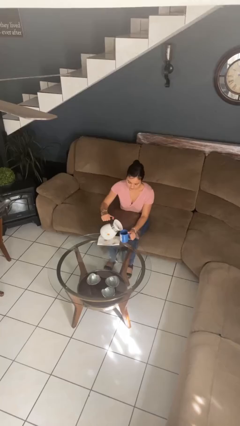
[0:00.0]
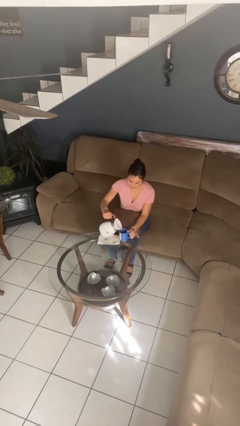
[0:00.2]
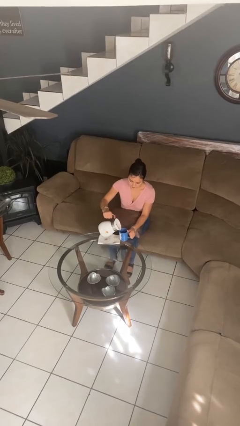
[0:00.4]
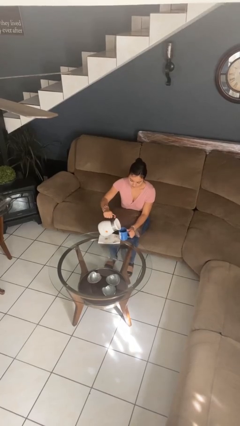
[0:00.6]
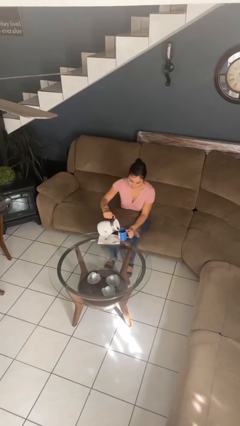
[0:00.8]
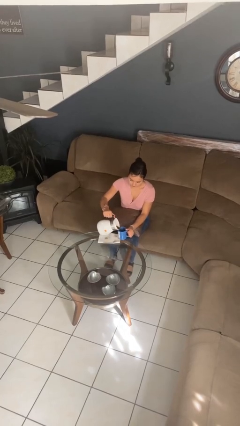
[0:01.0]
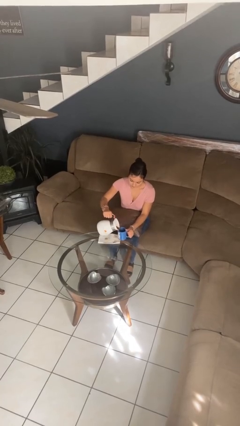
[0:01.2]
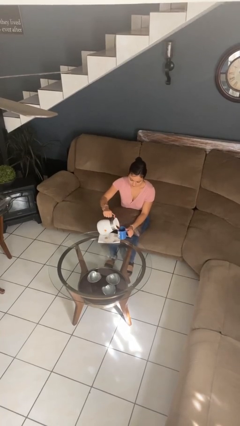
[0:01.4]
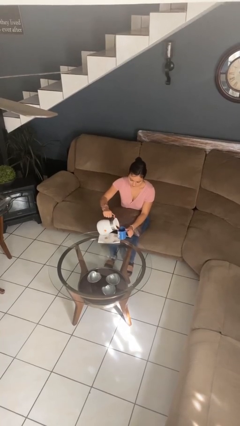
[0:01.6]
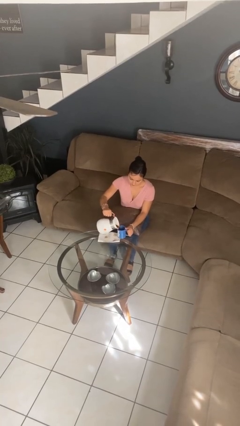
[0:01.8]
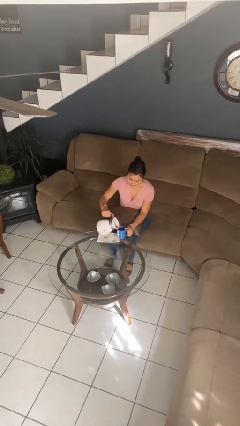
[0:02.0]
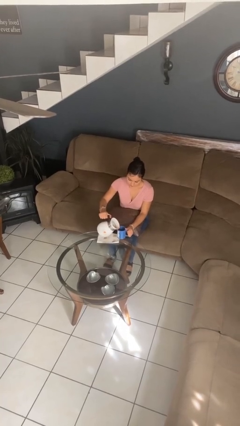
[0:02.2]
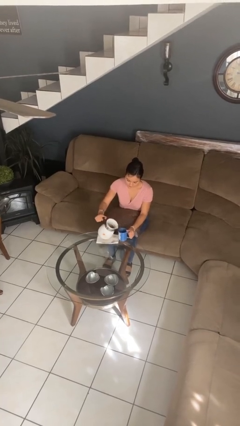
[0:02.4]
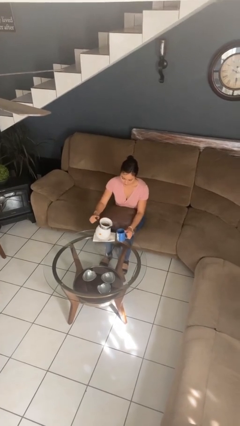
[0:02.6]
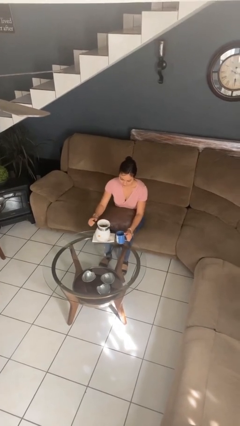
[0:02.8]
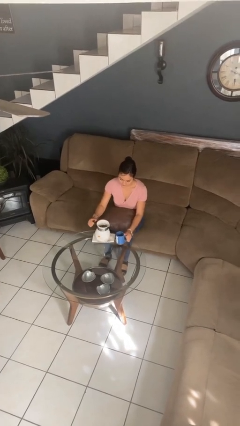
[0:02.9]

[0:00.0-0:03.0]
person pours coffee into mug

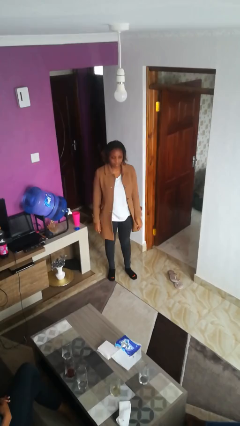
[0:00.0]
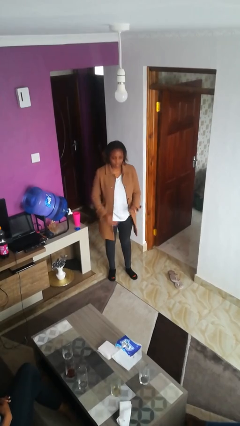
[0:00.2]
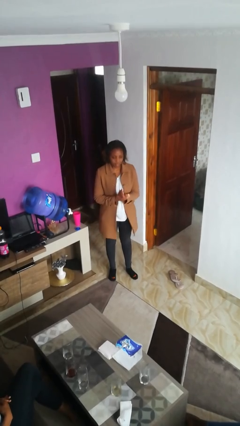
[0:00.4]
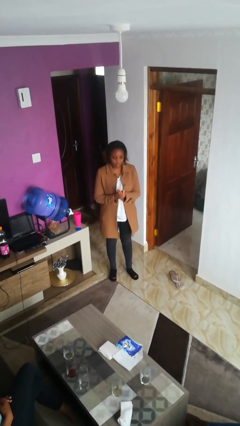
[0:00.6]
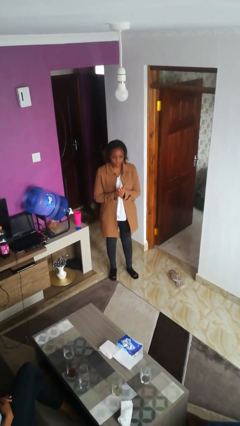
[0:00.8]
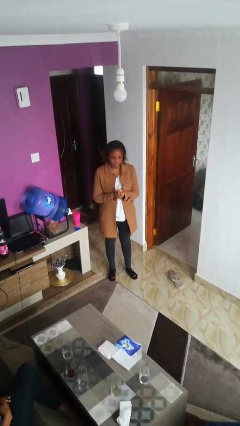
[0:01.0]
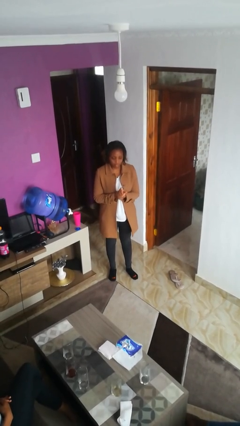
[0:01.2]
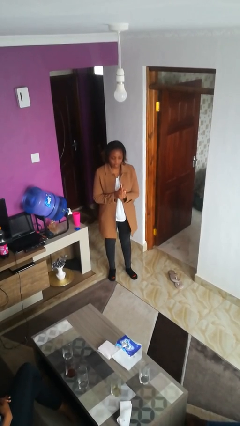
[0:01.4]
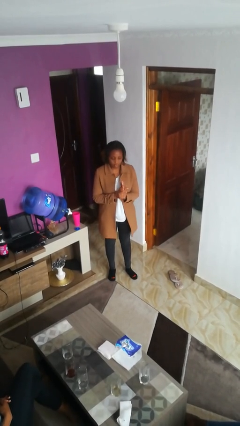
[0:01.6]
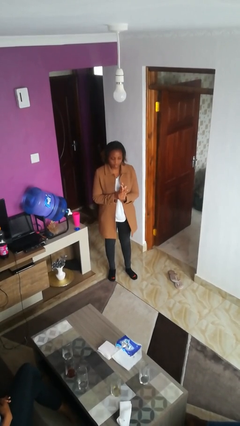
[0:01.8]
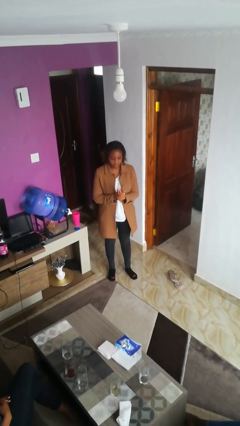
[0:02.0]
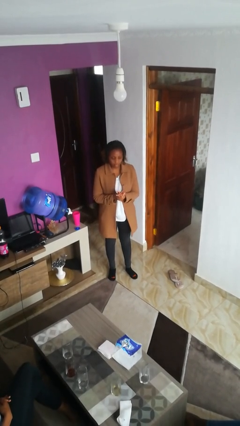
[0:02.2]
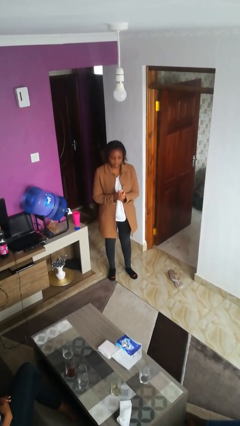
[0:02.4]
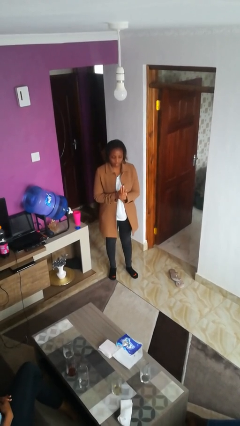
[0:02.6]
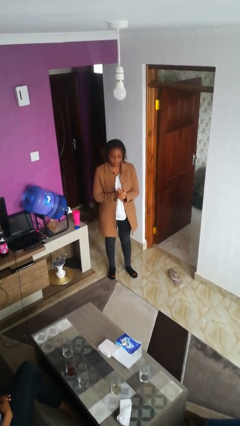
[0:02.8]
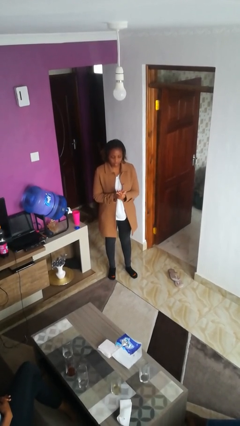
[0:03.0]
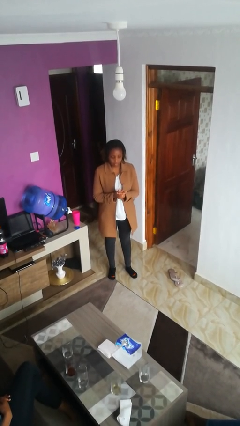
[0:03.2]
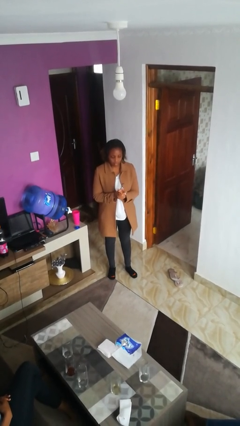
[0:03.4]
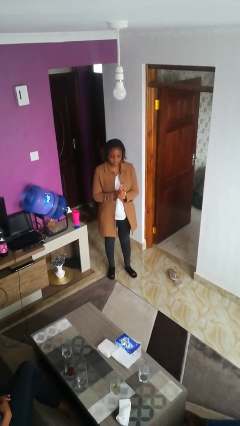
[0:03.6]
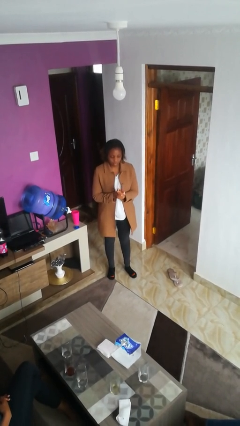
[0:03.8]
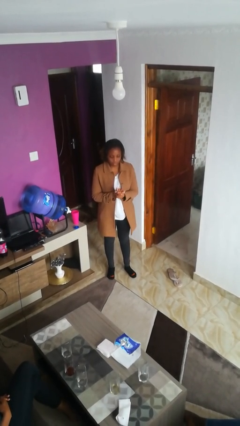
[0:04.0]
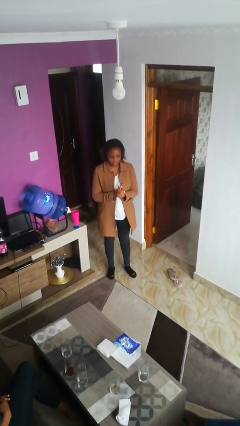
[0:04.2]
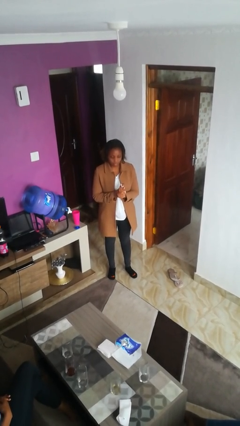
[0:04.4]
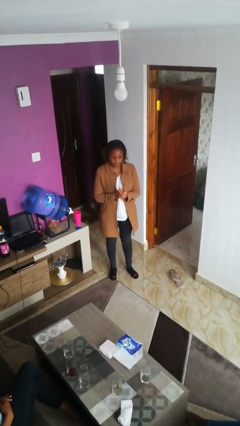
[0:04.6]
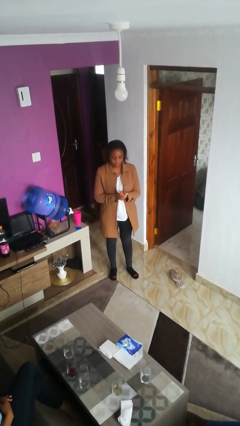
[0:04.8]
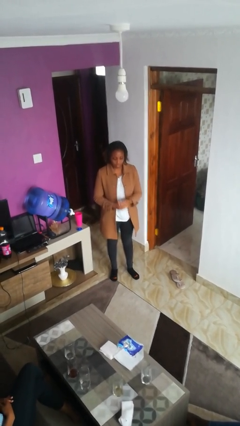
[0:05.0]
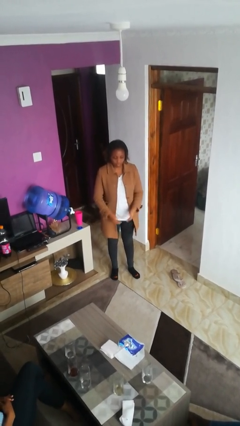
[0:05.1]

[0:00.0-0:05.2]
person cracks knuckles

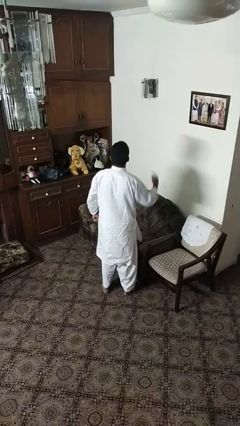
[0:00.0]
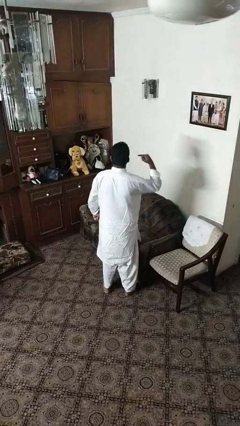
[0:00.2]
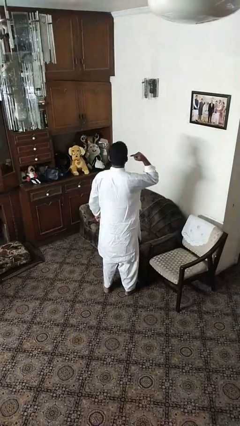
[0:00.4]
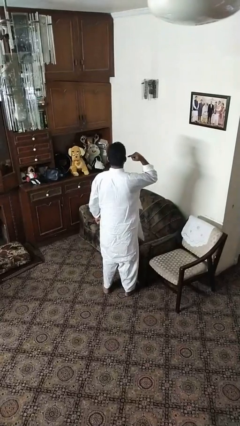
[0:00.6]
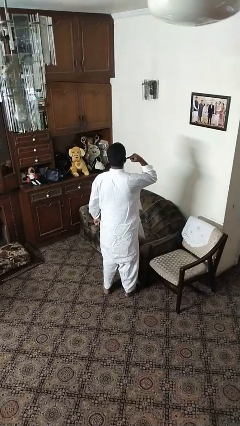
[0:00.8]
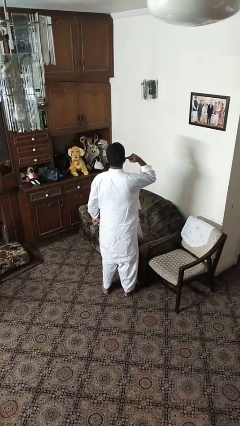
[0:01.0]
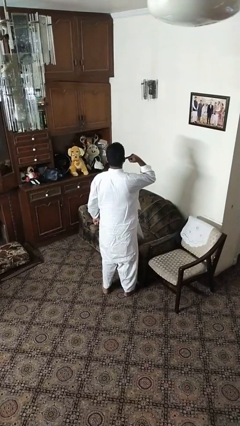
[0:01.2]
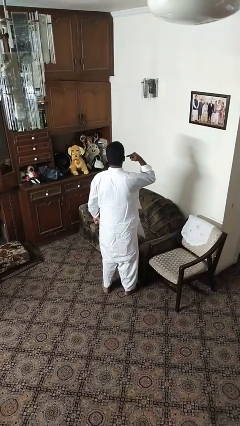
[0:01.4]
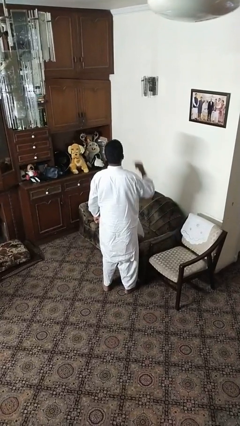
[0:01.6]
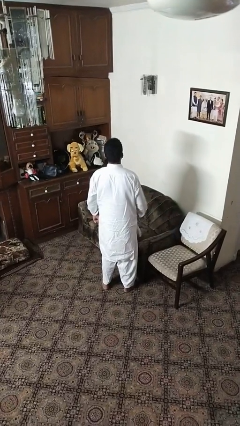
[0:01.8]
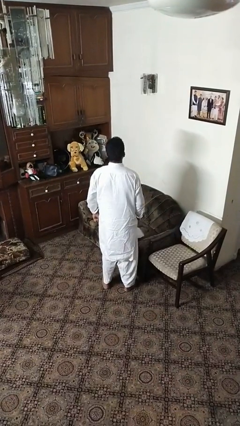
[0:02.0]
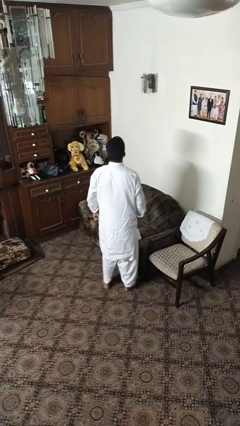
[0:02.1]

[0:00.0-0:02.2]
person gestures listen closely

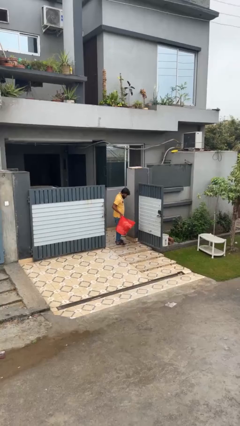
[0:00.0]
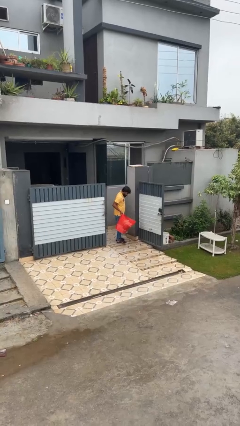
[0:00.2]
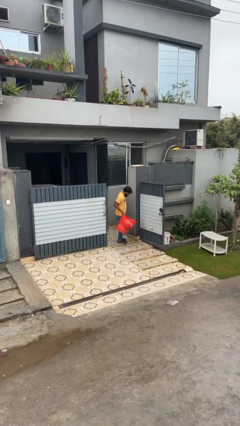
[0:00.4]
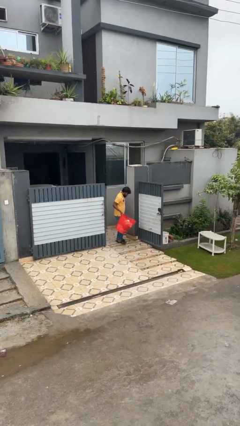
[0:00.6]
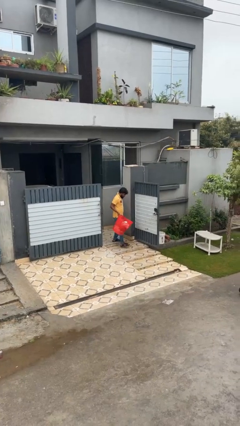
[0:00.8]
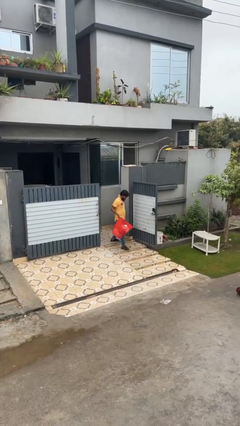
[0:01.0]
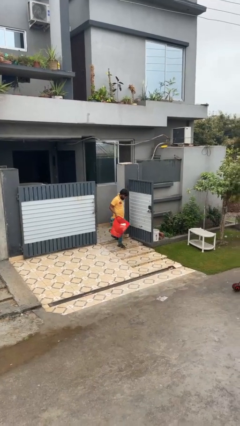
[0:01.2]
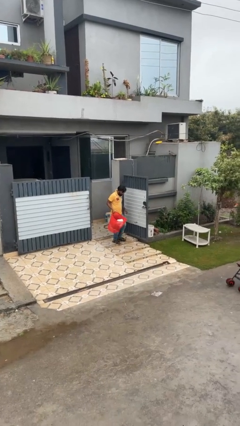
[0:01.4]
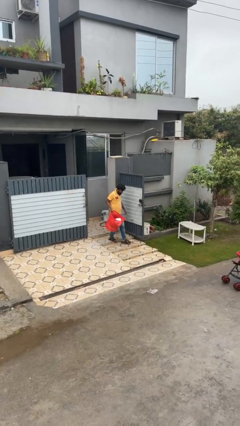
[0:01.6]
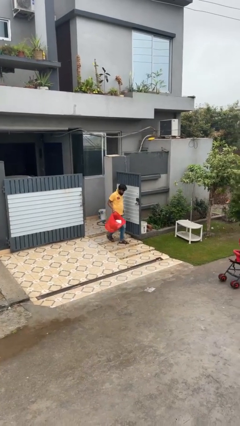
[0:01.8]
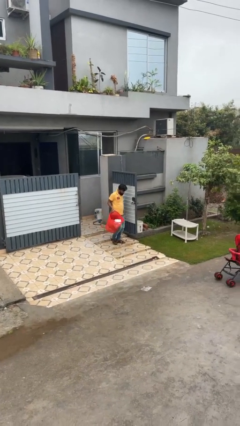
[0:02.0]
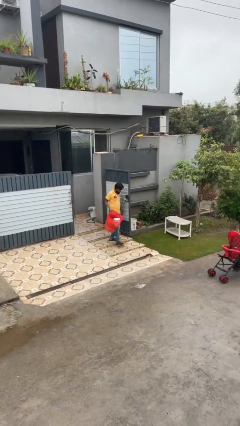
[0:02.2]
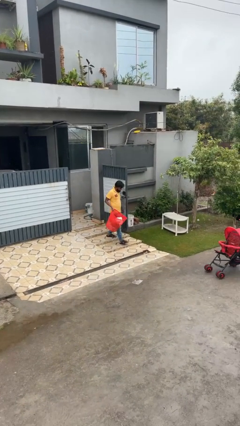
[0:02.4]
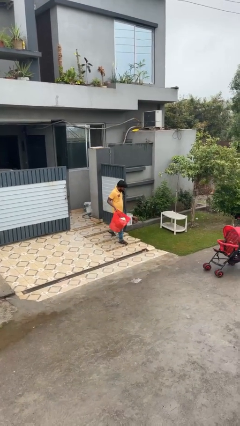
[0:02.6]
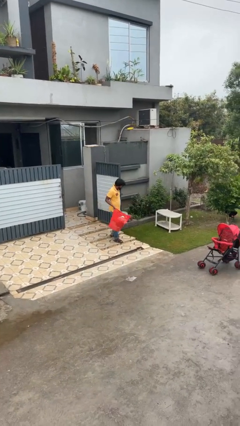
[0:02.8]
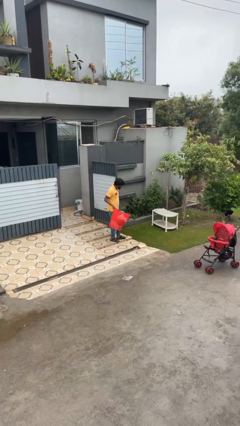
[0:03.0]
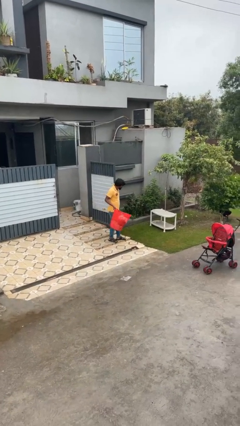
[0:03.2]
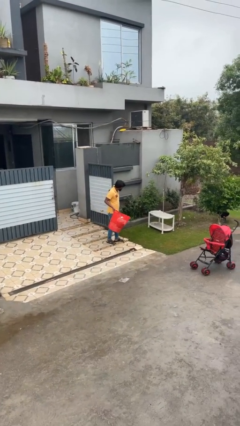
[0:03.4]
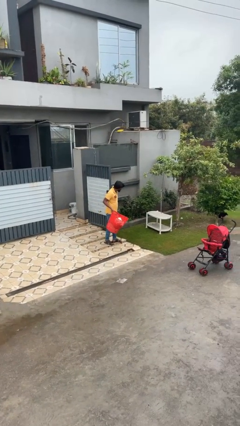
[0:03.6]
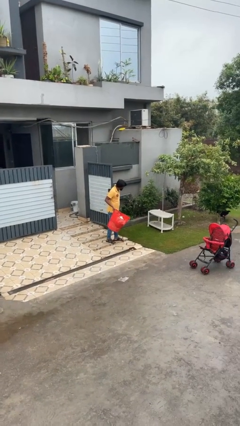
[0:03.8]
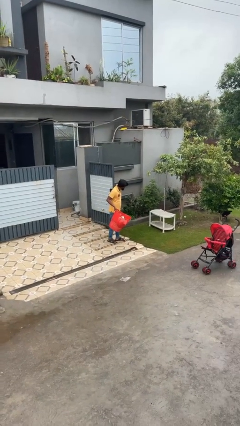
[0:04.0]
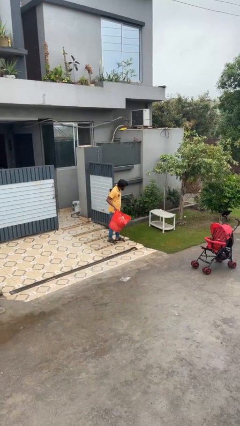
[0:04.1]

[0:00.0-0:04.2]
person carries laundry basket

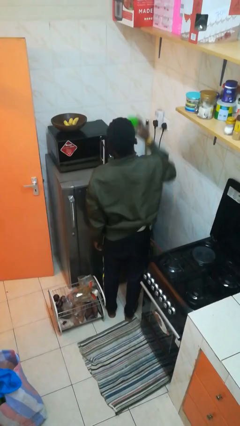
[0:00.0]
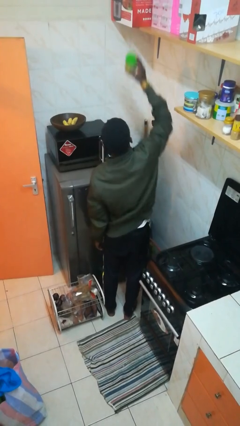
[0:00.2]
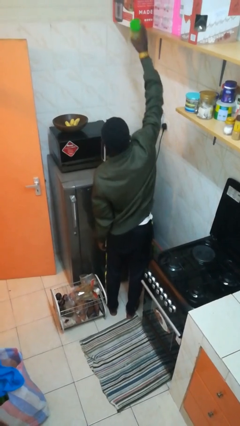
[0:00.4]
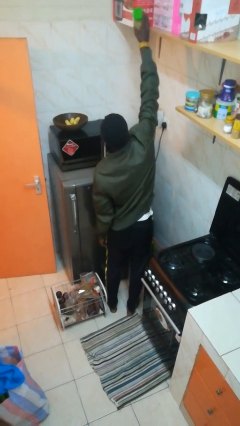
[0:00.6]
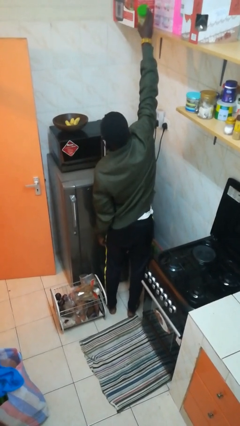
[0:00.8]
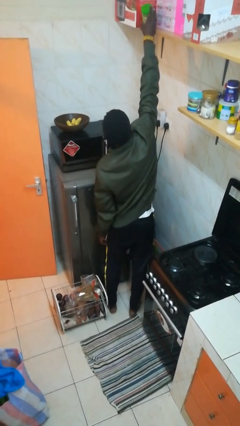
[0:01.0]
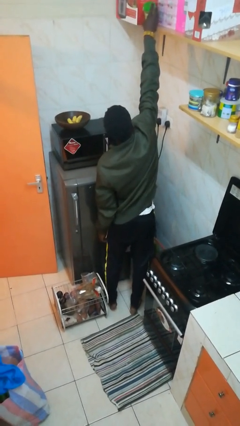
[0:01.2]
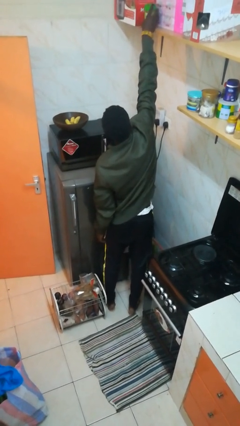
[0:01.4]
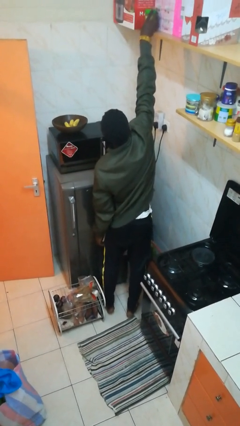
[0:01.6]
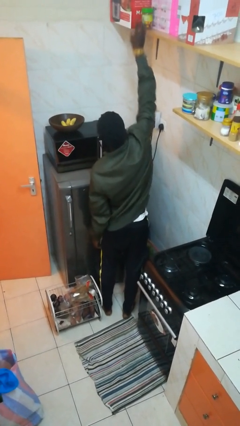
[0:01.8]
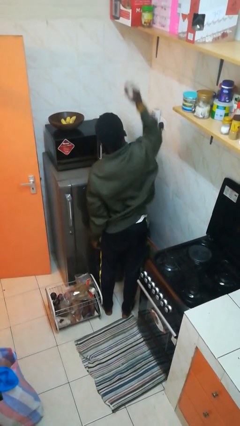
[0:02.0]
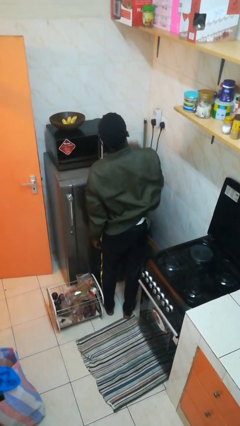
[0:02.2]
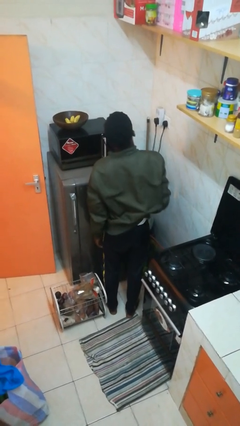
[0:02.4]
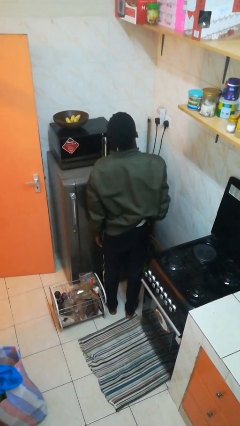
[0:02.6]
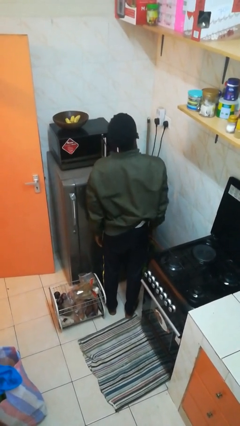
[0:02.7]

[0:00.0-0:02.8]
person puts down object on shelf

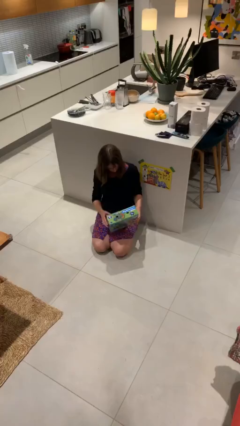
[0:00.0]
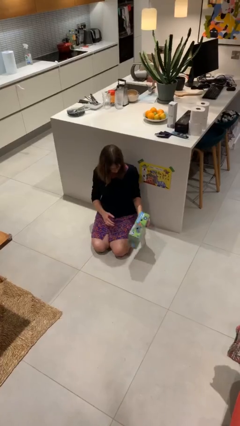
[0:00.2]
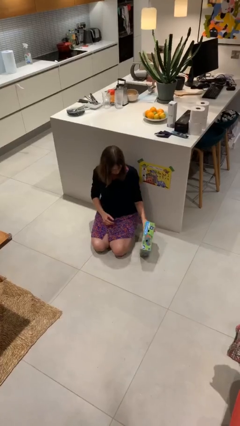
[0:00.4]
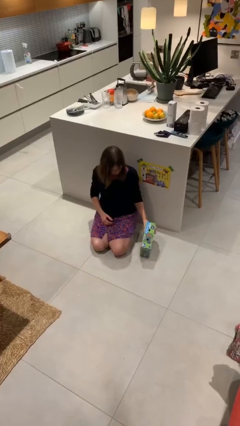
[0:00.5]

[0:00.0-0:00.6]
person puts down object on floor
